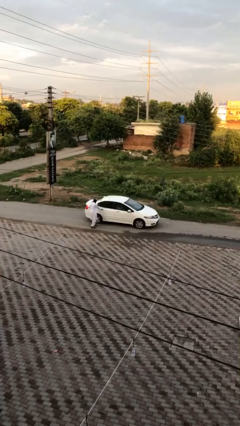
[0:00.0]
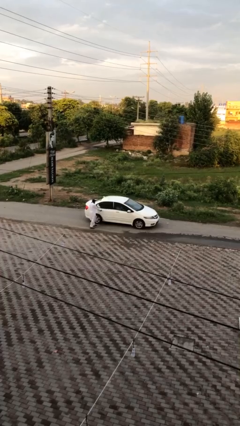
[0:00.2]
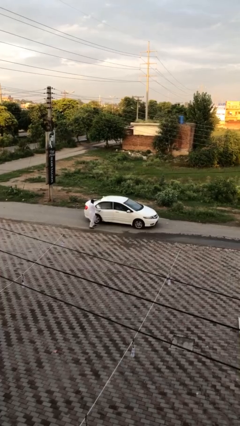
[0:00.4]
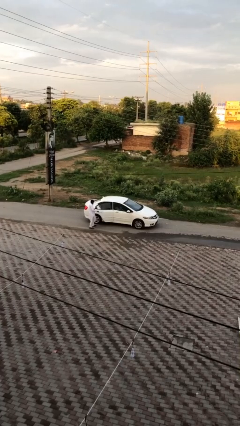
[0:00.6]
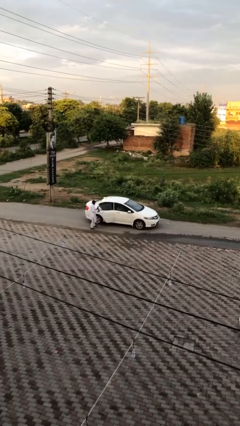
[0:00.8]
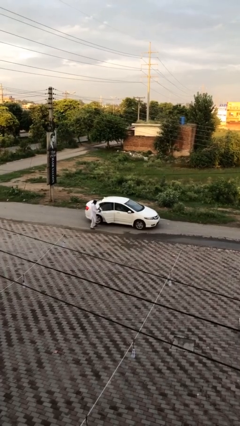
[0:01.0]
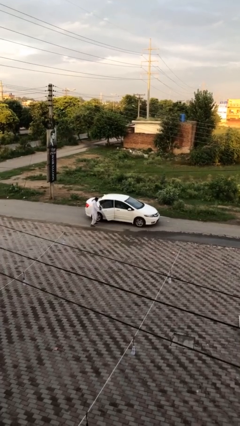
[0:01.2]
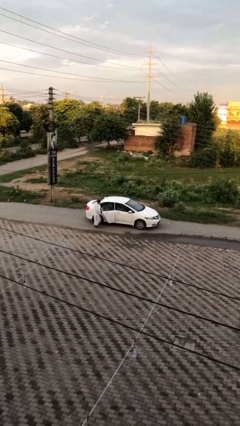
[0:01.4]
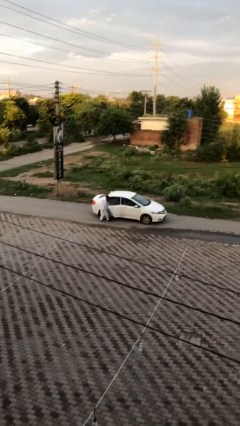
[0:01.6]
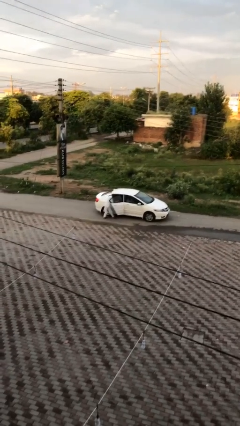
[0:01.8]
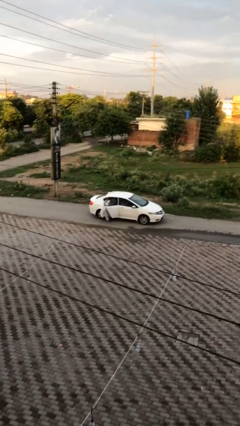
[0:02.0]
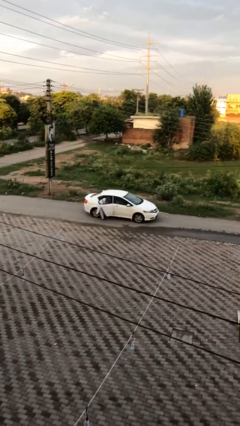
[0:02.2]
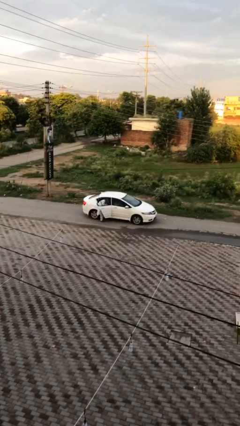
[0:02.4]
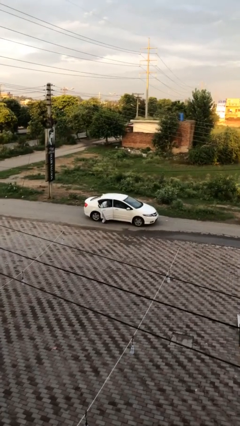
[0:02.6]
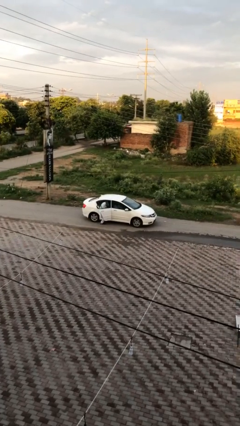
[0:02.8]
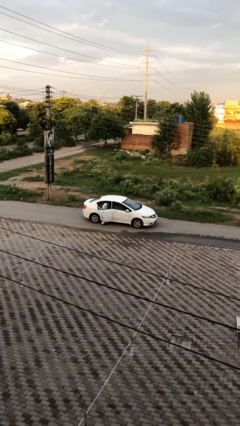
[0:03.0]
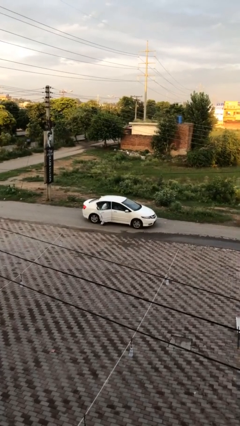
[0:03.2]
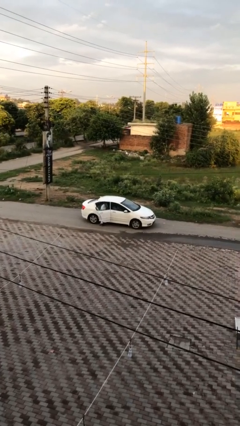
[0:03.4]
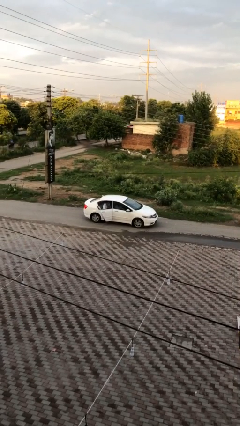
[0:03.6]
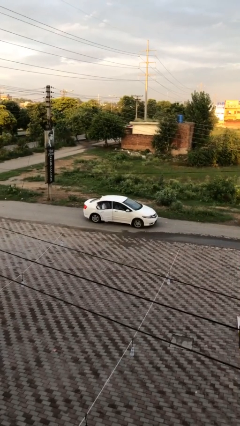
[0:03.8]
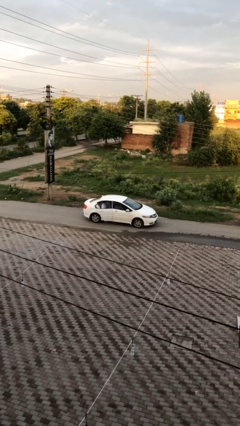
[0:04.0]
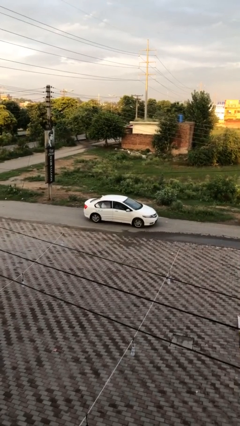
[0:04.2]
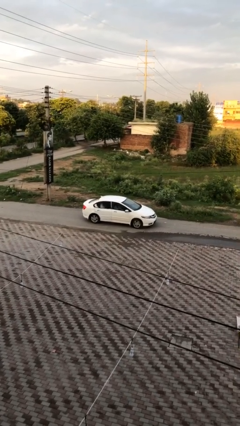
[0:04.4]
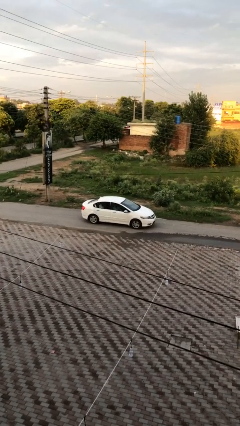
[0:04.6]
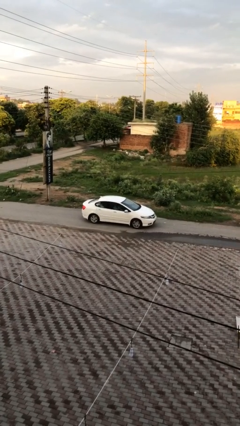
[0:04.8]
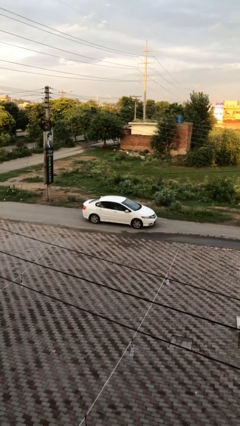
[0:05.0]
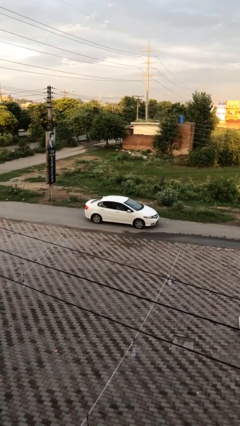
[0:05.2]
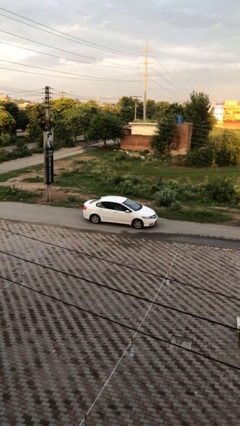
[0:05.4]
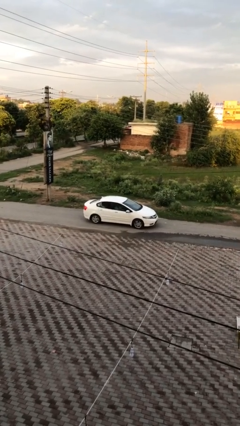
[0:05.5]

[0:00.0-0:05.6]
car picks up person

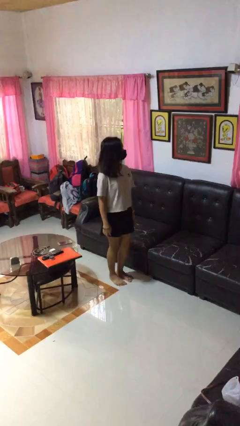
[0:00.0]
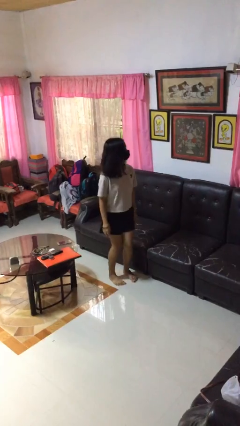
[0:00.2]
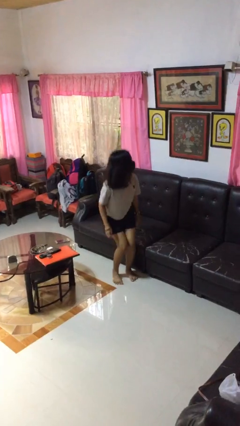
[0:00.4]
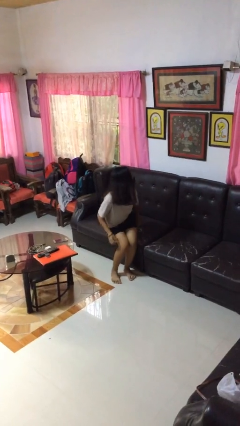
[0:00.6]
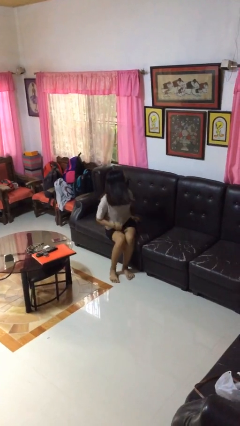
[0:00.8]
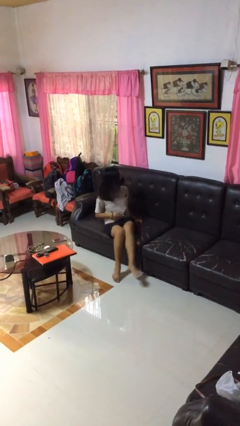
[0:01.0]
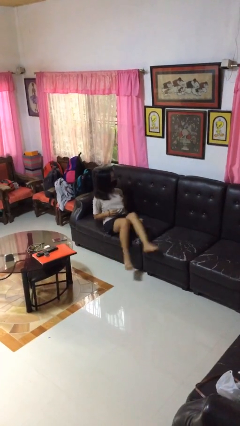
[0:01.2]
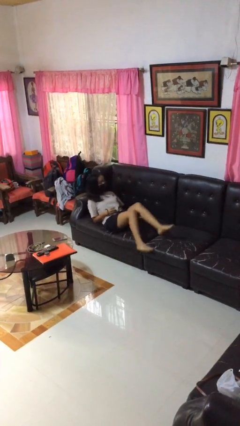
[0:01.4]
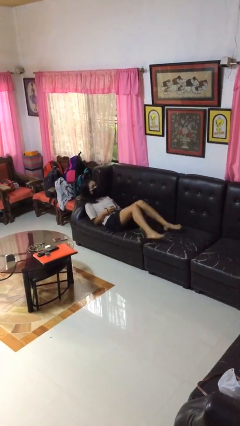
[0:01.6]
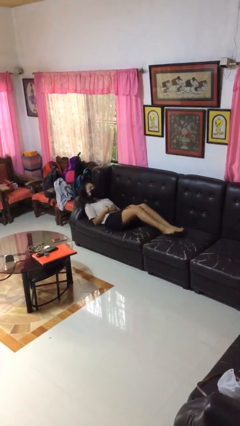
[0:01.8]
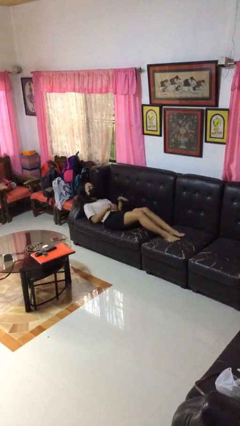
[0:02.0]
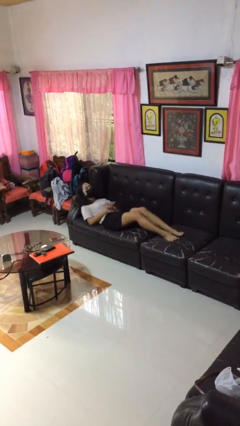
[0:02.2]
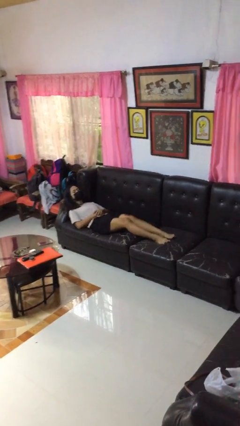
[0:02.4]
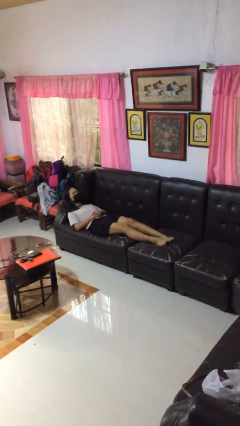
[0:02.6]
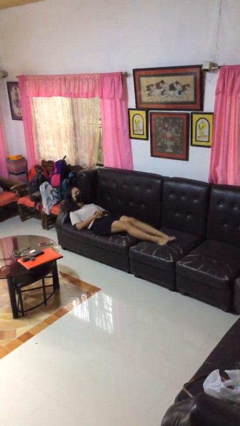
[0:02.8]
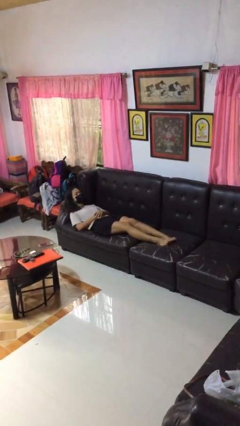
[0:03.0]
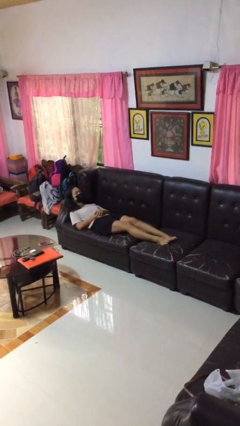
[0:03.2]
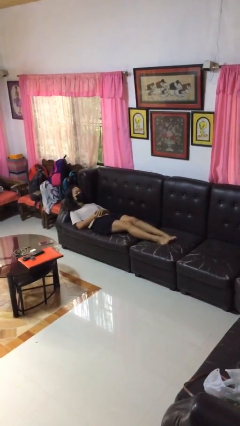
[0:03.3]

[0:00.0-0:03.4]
person lies down on couch

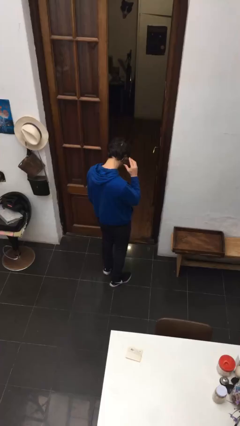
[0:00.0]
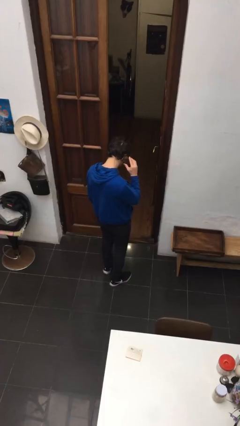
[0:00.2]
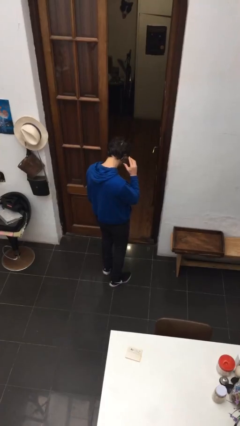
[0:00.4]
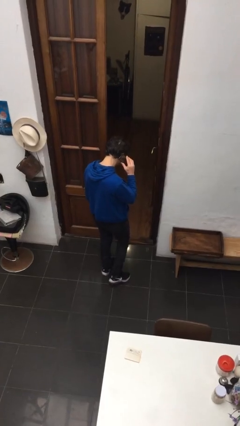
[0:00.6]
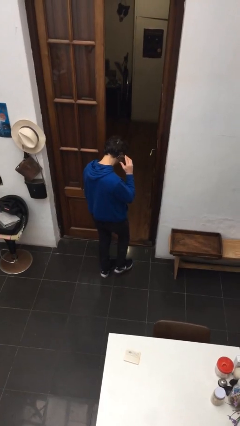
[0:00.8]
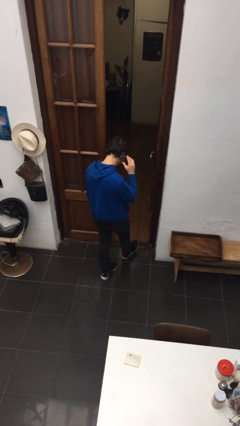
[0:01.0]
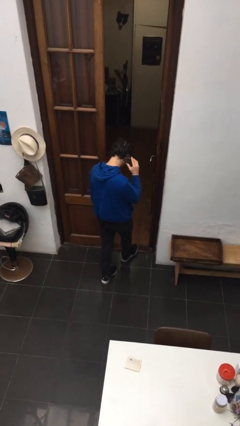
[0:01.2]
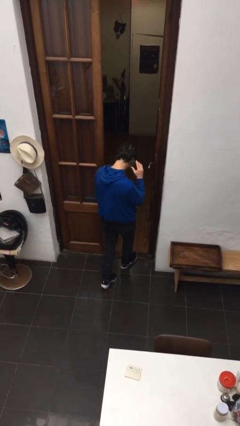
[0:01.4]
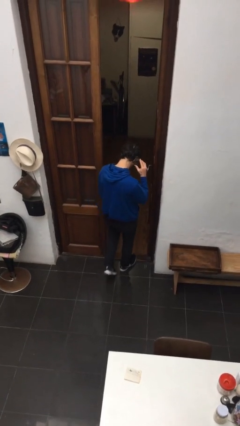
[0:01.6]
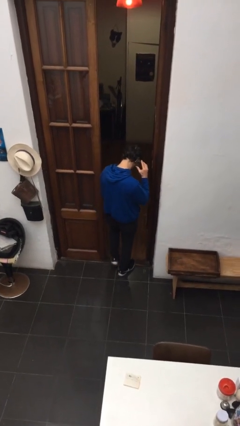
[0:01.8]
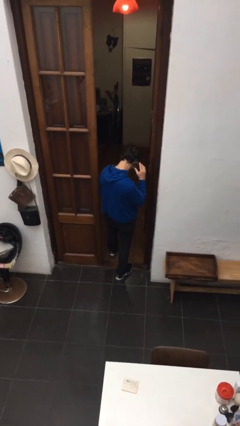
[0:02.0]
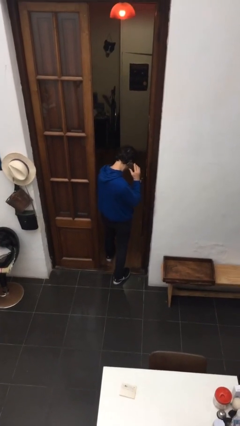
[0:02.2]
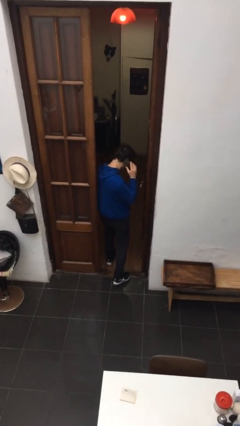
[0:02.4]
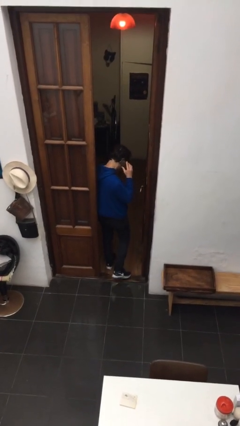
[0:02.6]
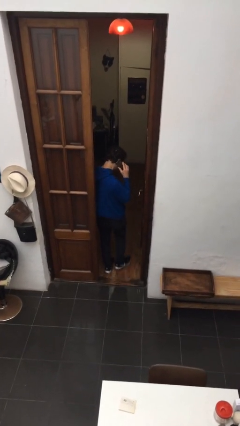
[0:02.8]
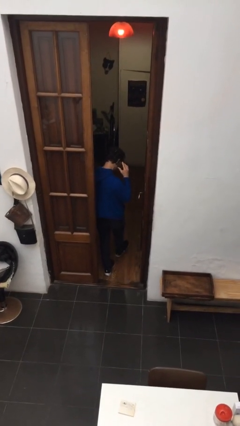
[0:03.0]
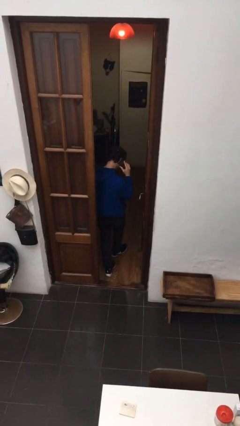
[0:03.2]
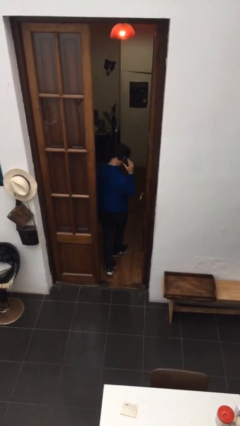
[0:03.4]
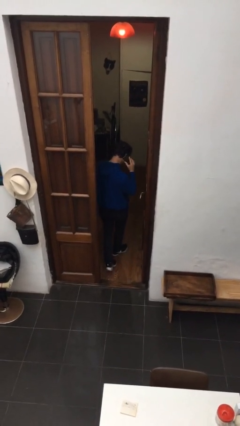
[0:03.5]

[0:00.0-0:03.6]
person exits scene through structure

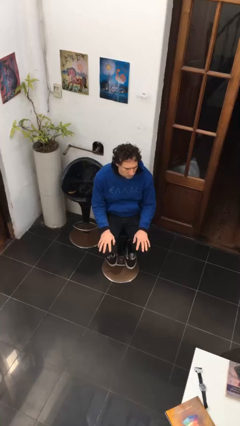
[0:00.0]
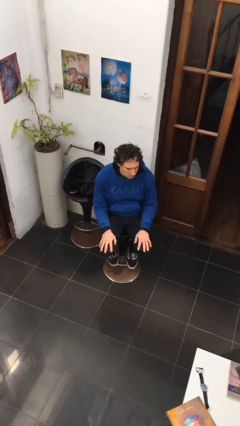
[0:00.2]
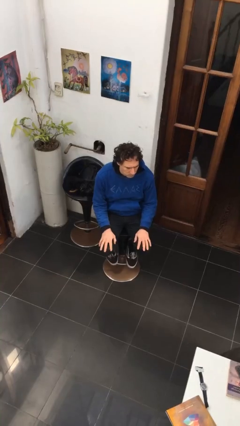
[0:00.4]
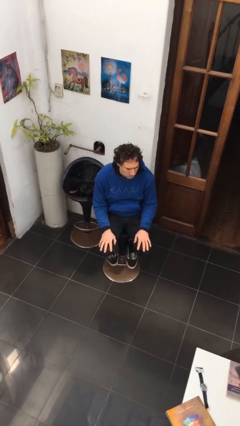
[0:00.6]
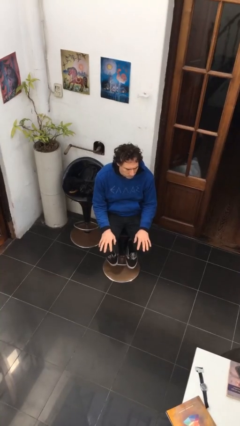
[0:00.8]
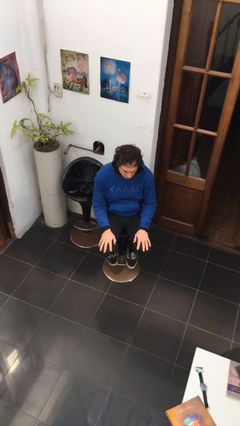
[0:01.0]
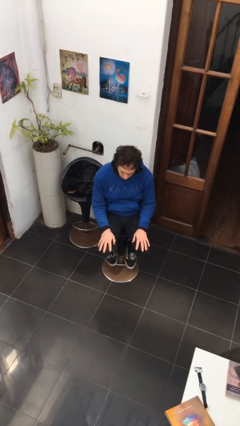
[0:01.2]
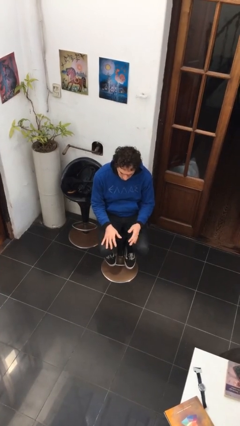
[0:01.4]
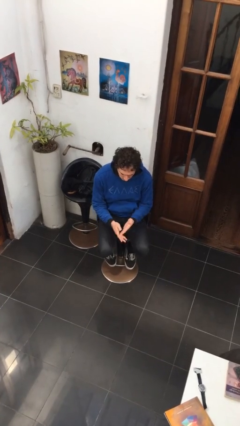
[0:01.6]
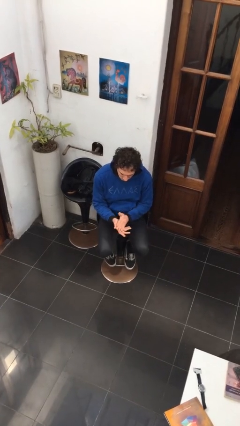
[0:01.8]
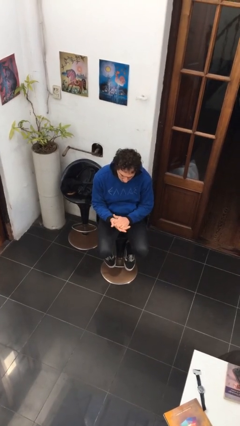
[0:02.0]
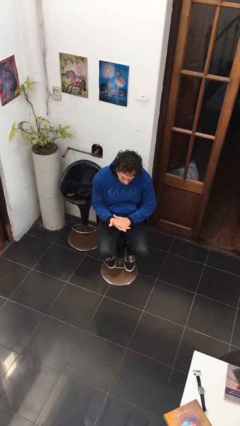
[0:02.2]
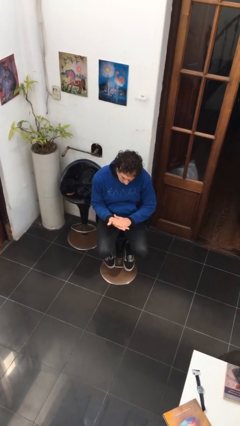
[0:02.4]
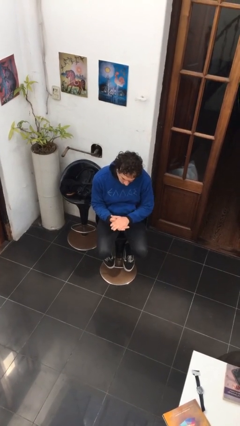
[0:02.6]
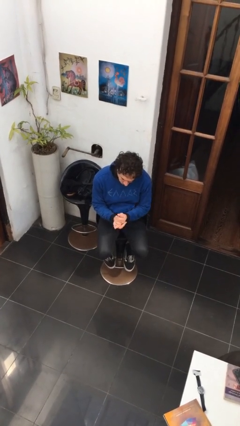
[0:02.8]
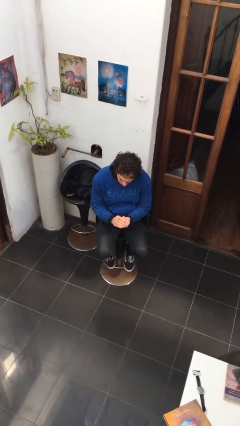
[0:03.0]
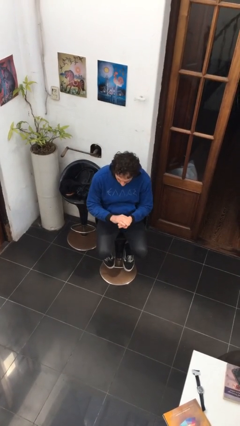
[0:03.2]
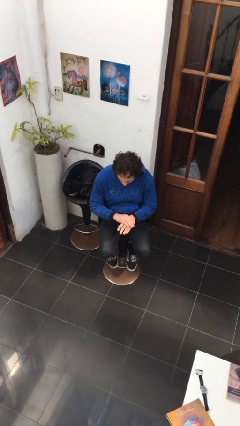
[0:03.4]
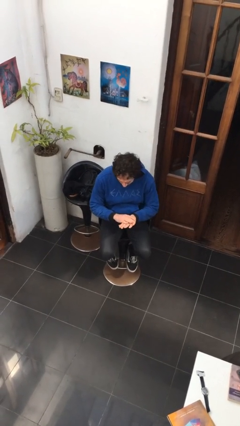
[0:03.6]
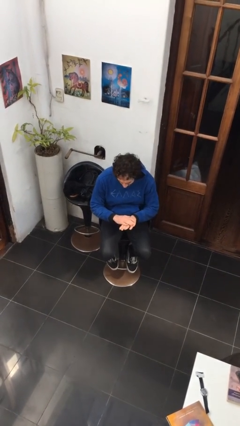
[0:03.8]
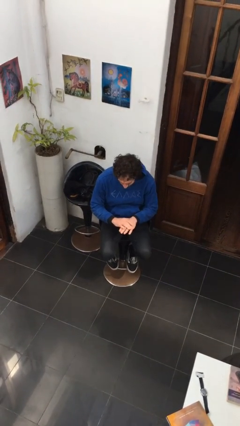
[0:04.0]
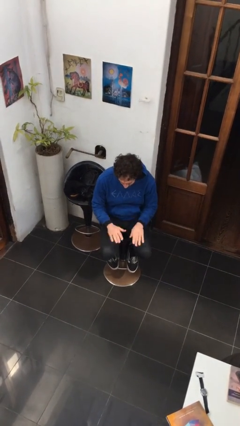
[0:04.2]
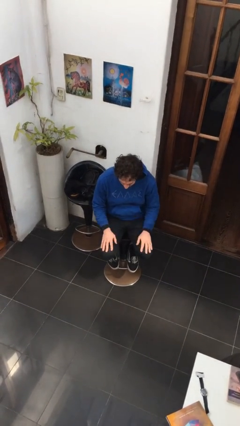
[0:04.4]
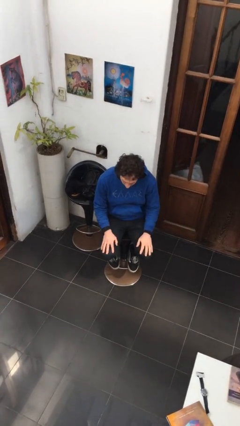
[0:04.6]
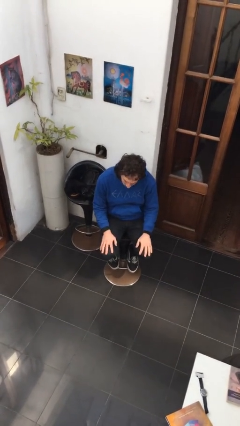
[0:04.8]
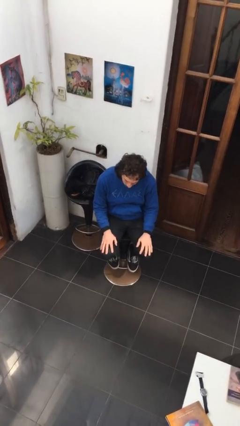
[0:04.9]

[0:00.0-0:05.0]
person looks at hands in lap
